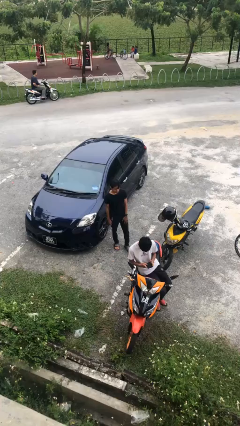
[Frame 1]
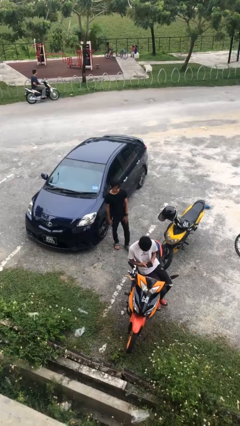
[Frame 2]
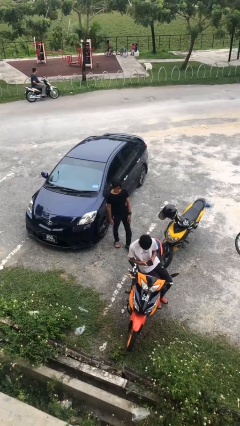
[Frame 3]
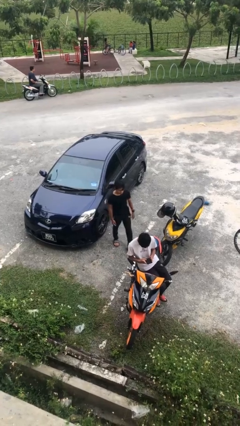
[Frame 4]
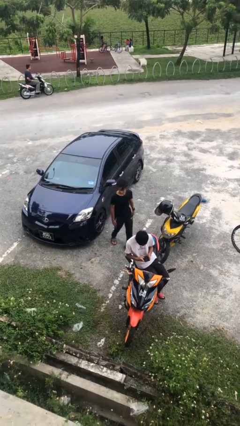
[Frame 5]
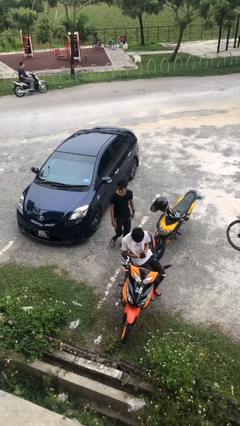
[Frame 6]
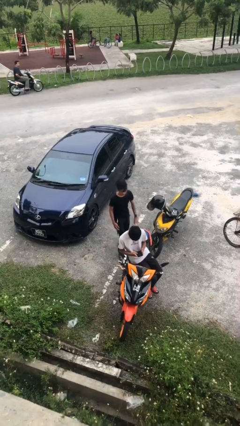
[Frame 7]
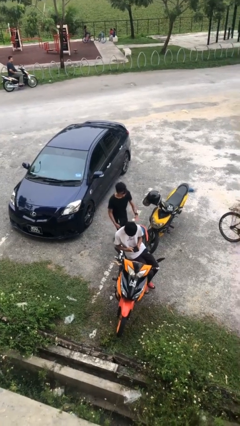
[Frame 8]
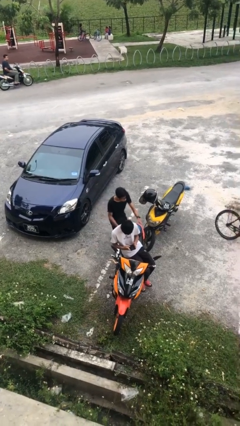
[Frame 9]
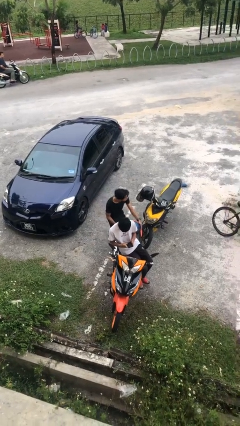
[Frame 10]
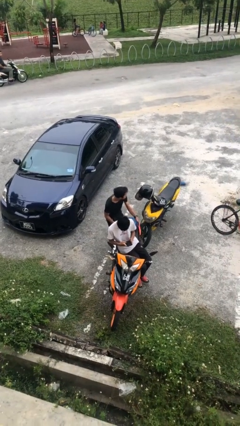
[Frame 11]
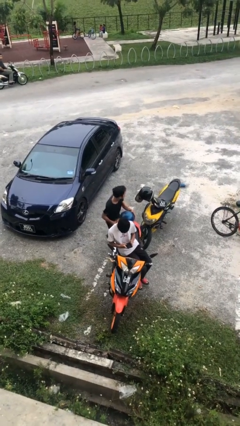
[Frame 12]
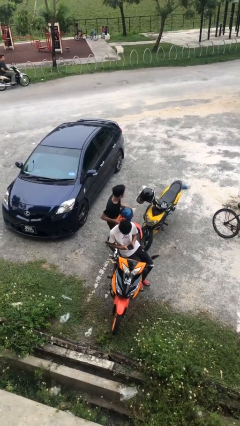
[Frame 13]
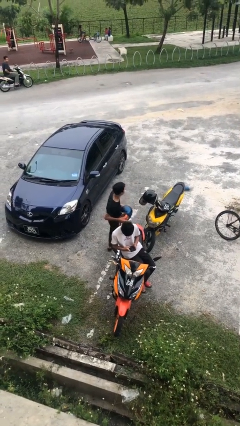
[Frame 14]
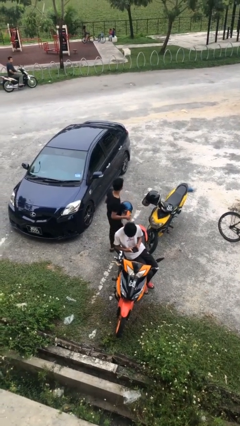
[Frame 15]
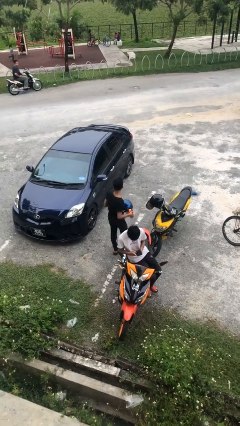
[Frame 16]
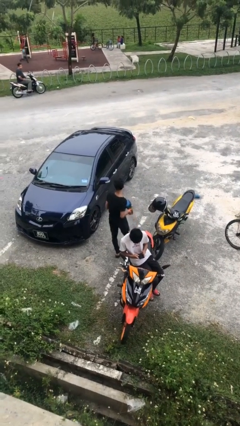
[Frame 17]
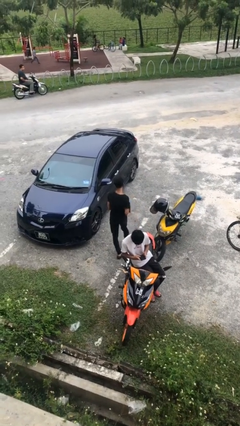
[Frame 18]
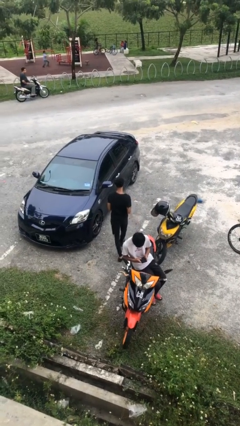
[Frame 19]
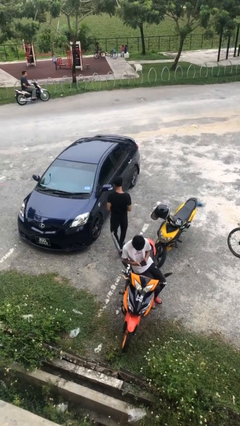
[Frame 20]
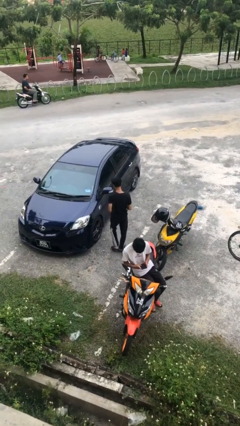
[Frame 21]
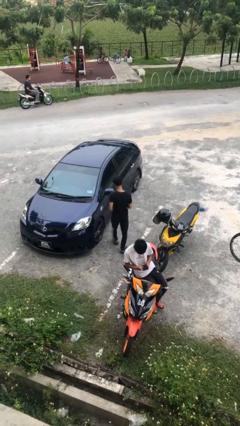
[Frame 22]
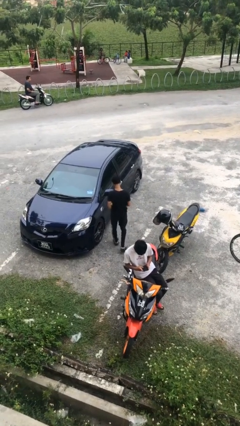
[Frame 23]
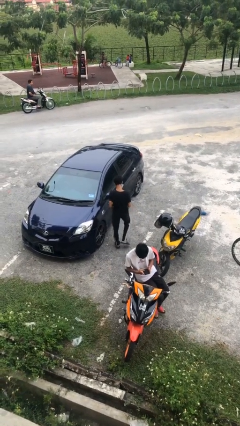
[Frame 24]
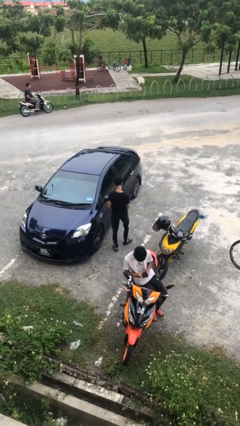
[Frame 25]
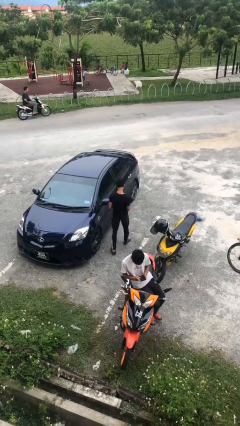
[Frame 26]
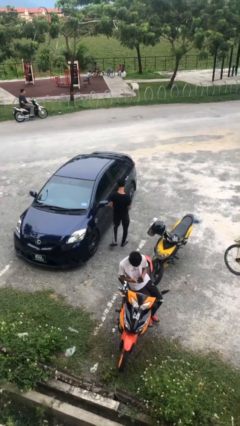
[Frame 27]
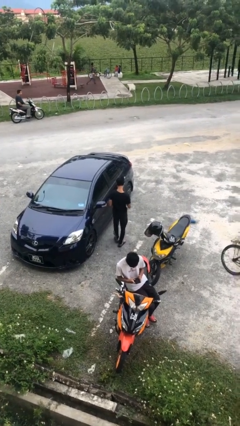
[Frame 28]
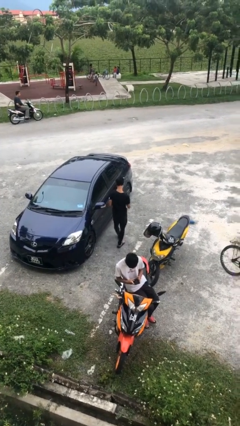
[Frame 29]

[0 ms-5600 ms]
person steals object from person

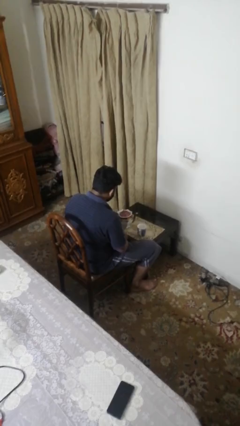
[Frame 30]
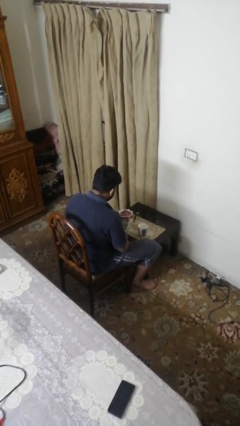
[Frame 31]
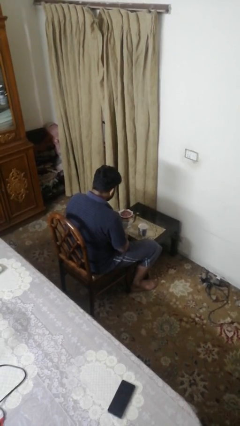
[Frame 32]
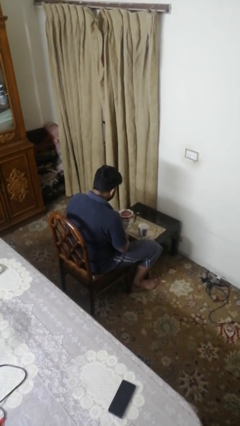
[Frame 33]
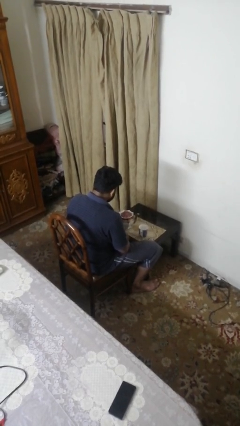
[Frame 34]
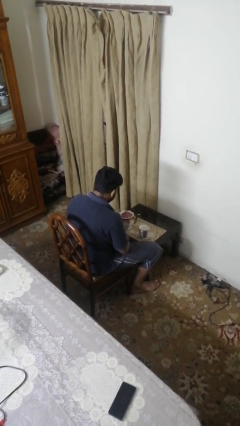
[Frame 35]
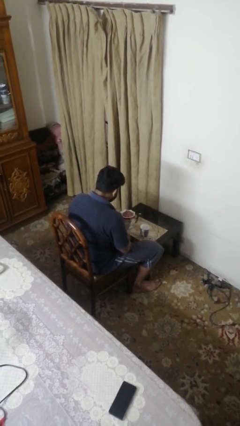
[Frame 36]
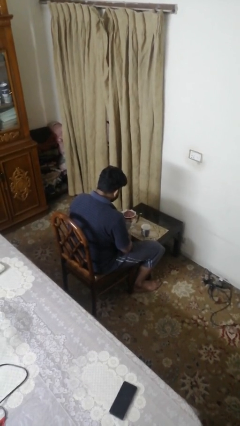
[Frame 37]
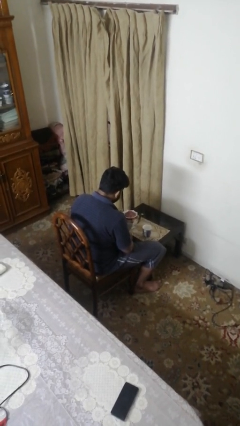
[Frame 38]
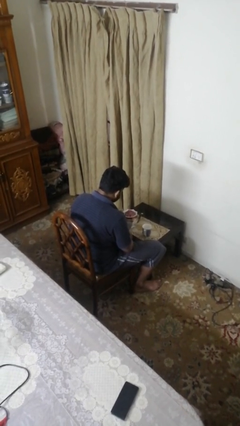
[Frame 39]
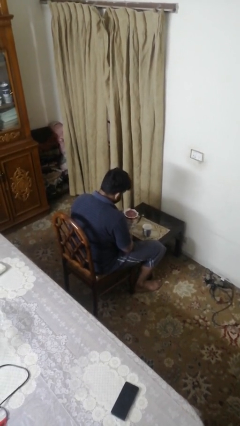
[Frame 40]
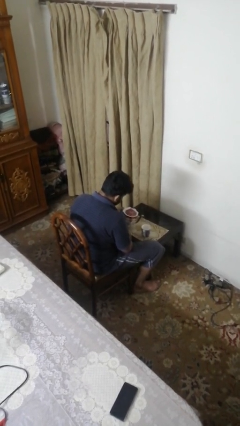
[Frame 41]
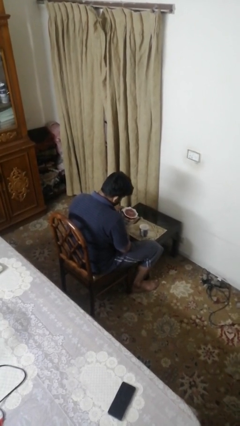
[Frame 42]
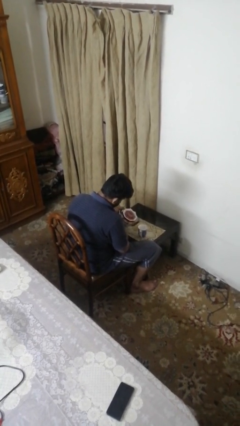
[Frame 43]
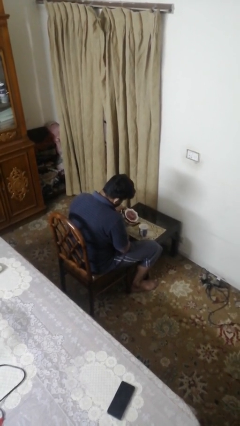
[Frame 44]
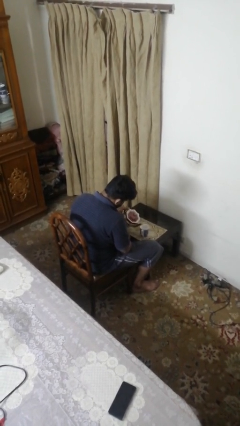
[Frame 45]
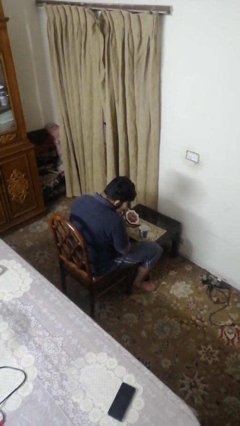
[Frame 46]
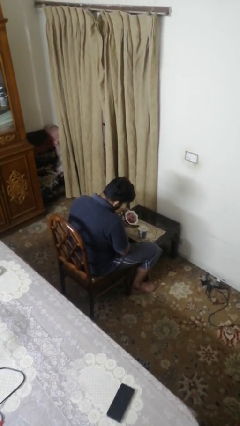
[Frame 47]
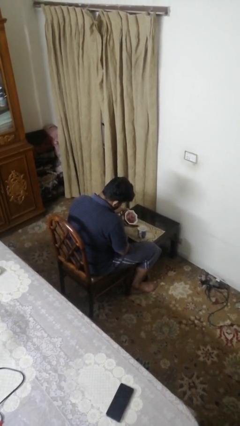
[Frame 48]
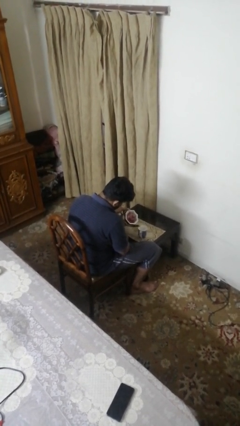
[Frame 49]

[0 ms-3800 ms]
person pours coffee into mug

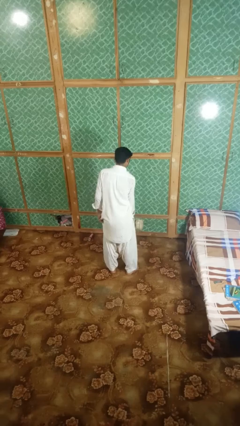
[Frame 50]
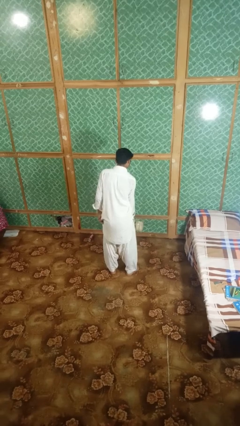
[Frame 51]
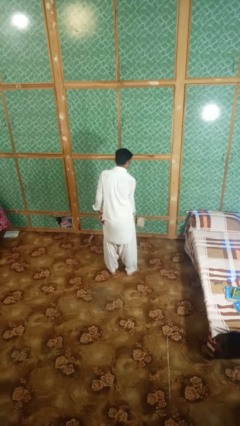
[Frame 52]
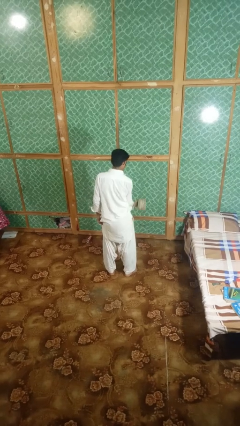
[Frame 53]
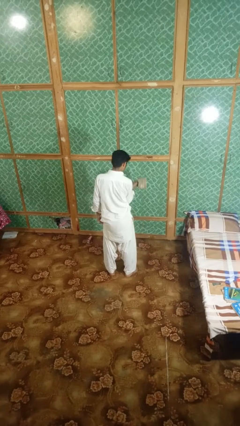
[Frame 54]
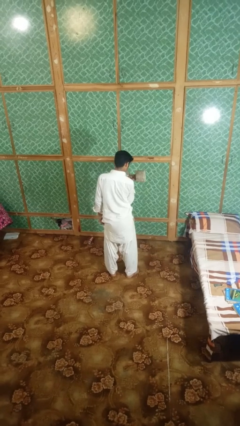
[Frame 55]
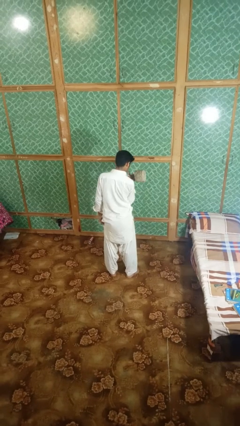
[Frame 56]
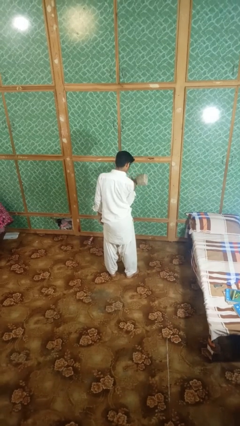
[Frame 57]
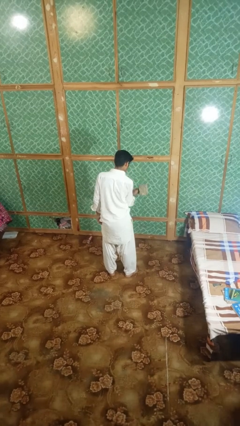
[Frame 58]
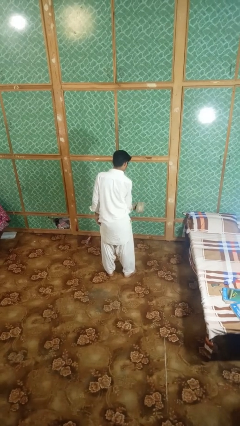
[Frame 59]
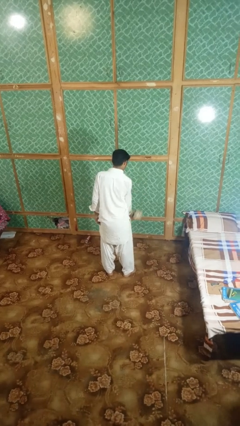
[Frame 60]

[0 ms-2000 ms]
person lifts dumbbells

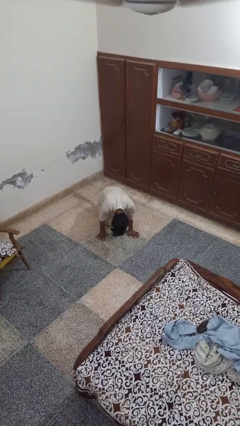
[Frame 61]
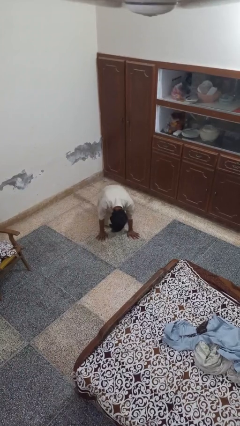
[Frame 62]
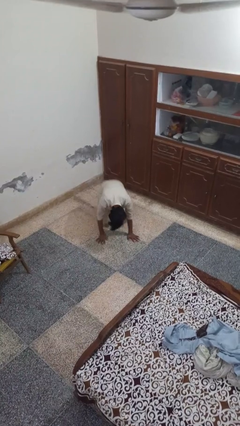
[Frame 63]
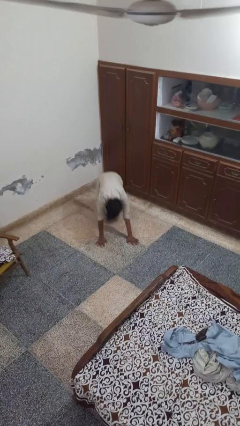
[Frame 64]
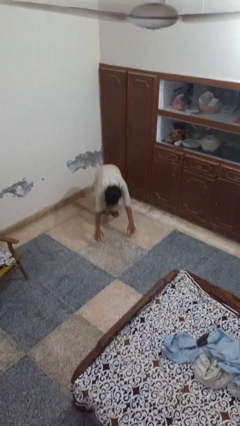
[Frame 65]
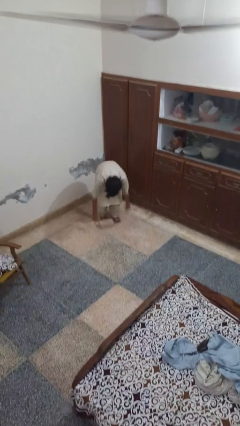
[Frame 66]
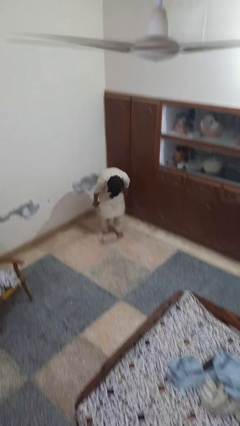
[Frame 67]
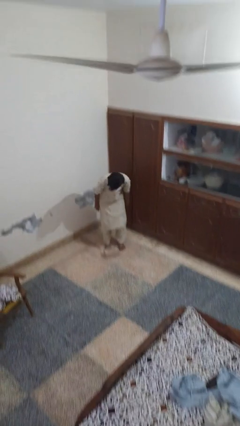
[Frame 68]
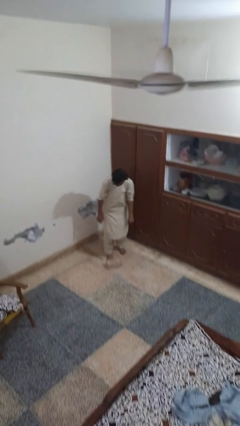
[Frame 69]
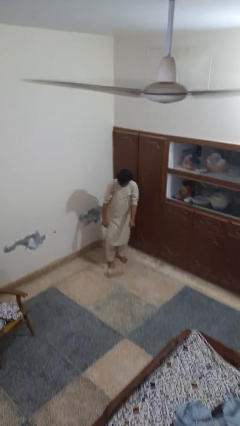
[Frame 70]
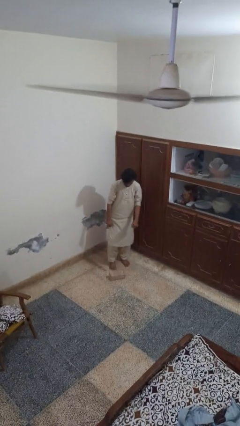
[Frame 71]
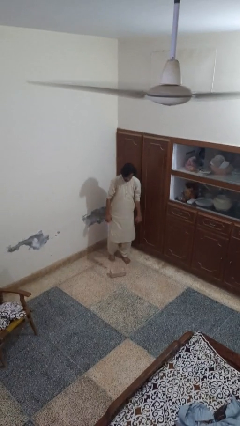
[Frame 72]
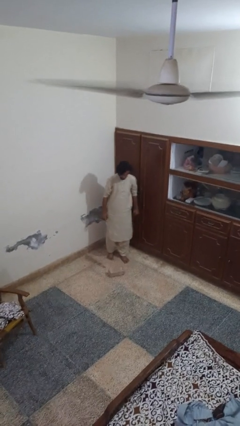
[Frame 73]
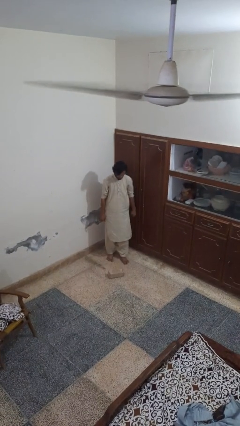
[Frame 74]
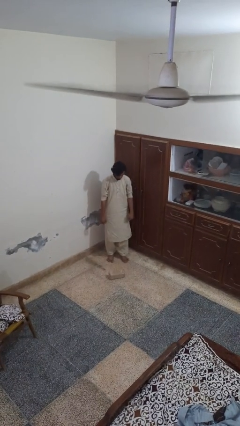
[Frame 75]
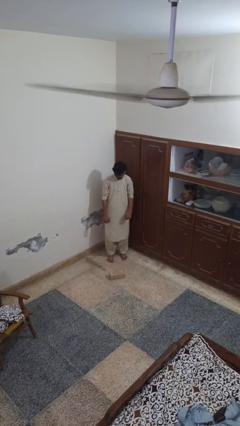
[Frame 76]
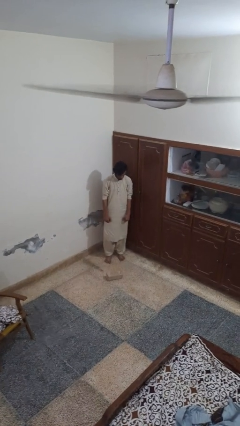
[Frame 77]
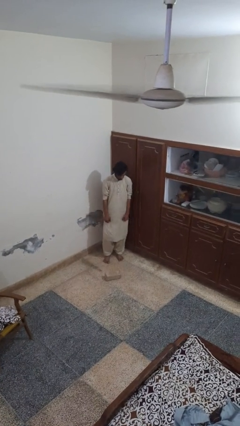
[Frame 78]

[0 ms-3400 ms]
person stands up from floor

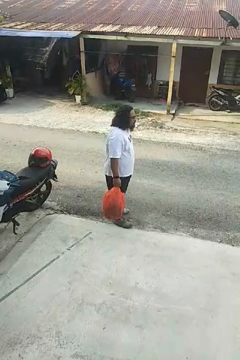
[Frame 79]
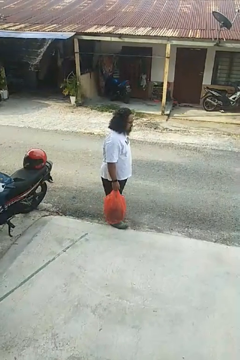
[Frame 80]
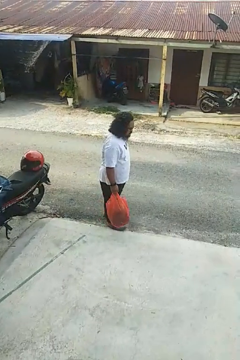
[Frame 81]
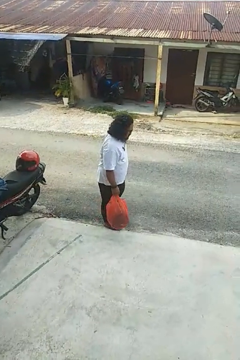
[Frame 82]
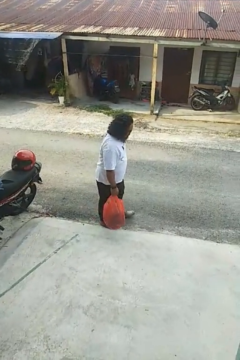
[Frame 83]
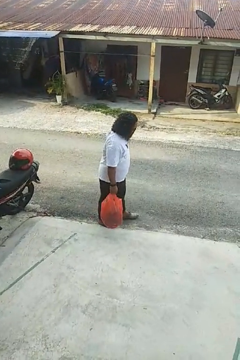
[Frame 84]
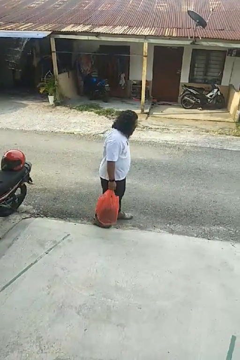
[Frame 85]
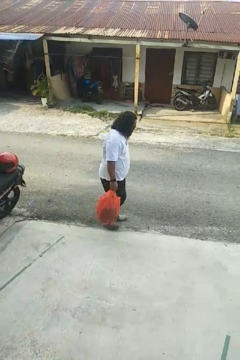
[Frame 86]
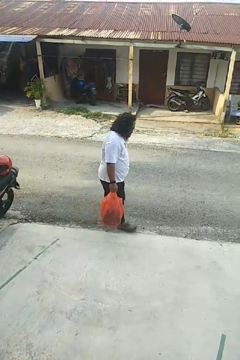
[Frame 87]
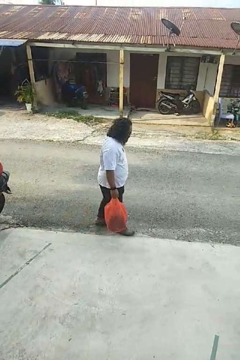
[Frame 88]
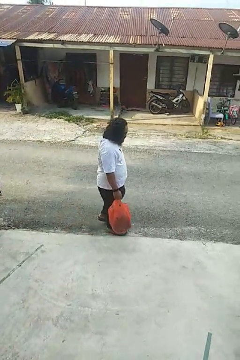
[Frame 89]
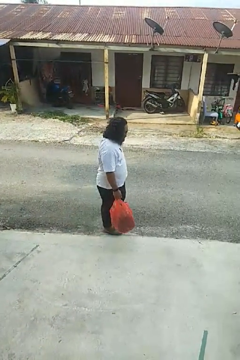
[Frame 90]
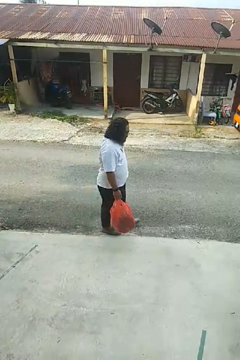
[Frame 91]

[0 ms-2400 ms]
person carries groceries

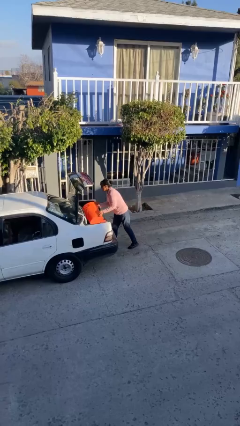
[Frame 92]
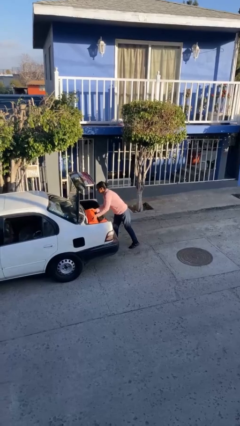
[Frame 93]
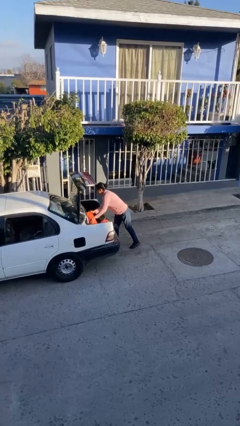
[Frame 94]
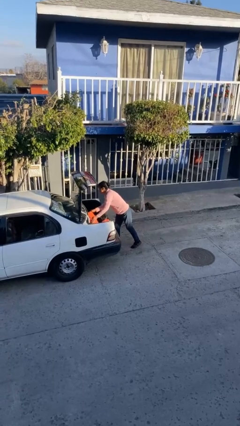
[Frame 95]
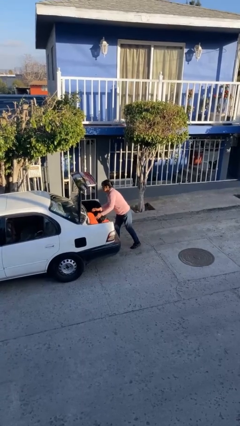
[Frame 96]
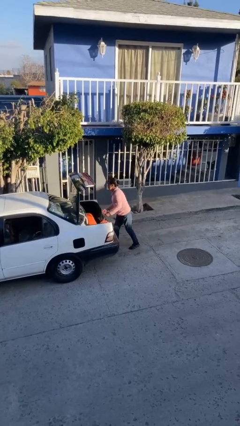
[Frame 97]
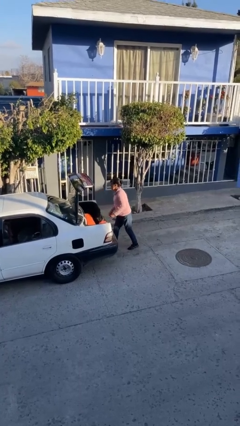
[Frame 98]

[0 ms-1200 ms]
person loads car
